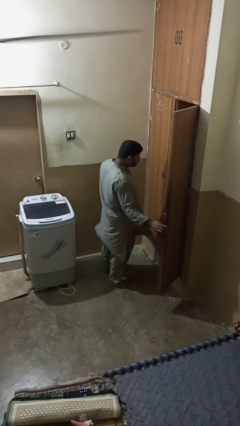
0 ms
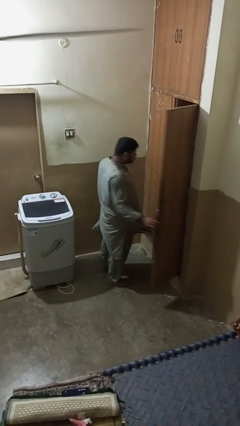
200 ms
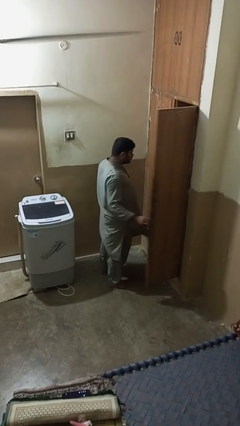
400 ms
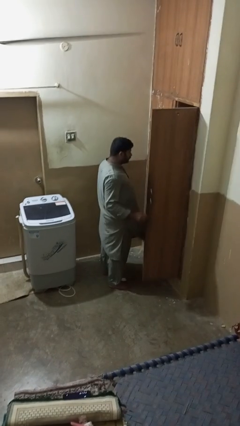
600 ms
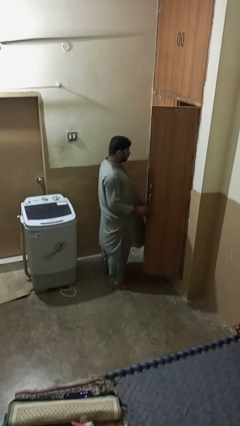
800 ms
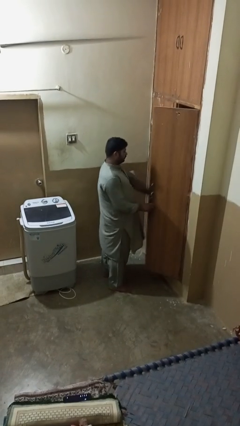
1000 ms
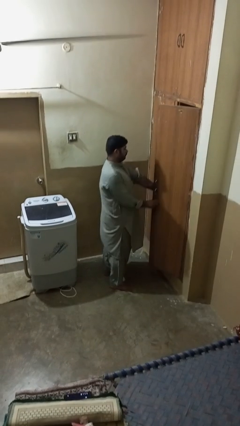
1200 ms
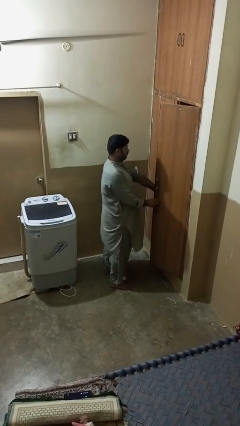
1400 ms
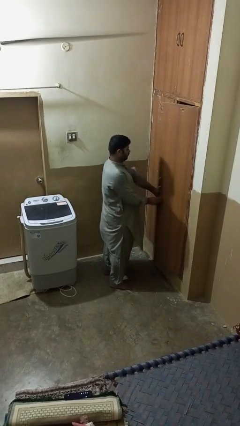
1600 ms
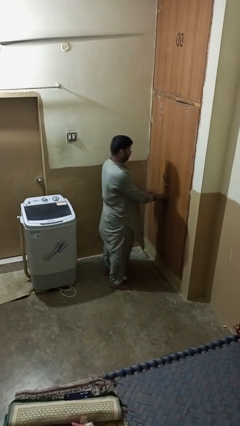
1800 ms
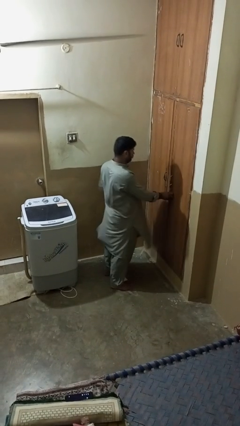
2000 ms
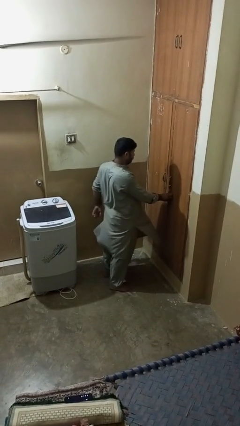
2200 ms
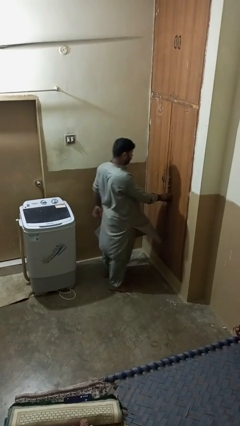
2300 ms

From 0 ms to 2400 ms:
person closes closet door

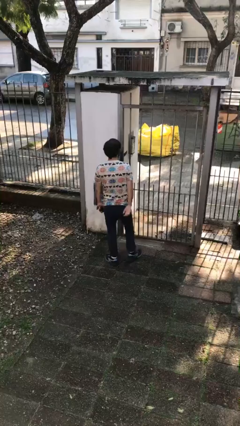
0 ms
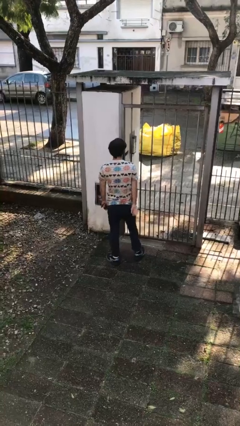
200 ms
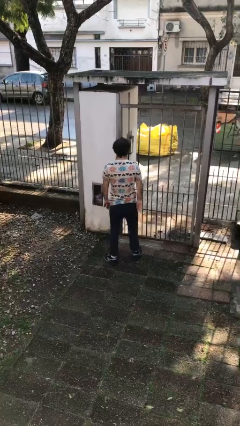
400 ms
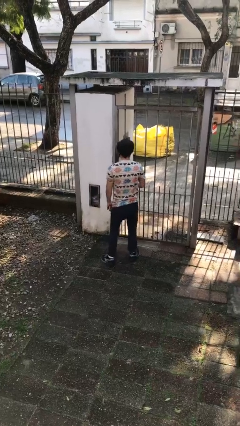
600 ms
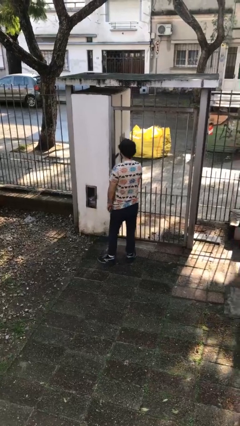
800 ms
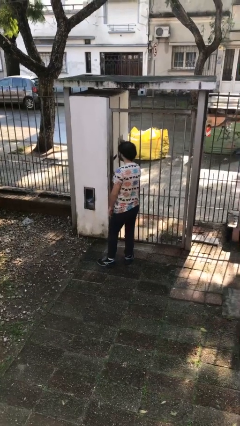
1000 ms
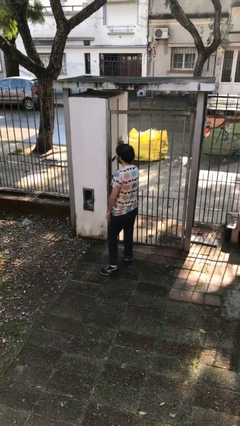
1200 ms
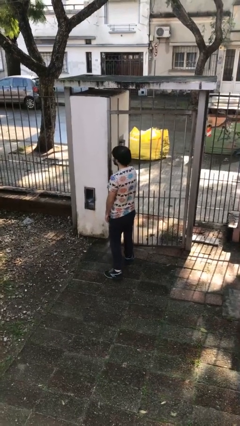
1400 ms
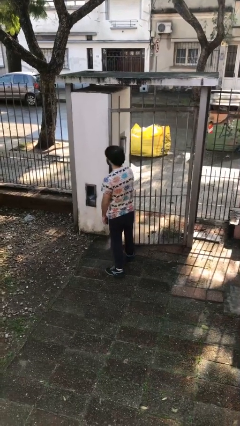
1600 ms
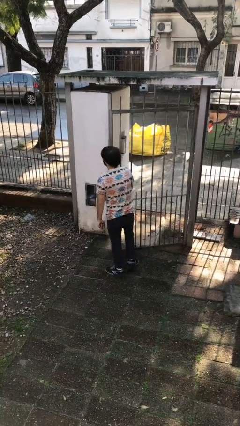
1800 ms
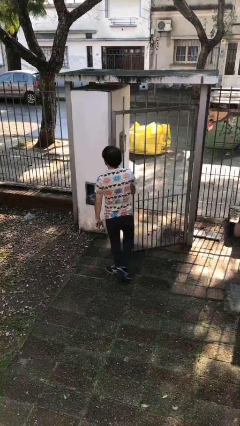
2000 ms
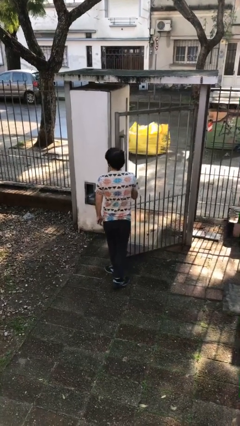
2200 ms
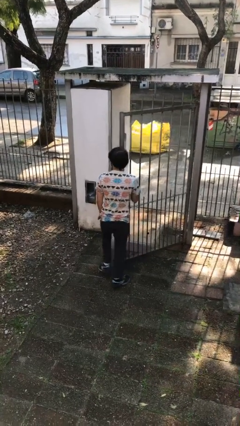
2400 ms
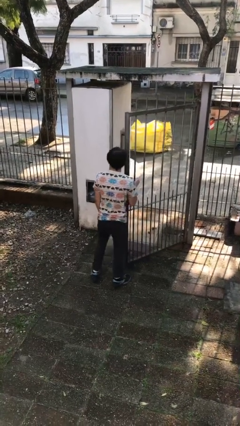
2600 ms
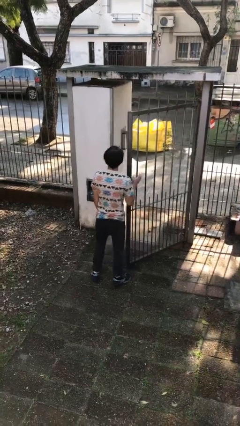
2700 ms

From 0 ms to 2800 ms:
person opens gate

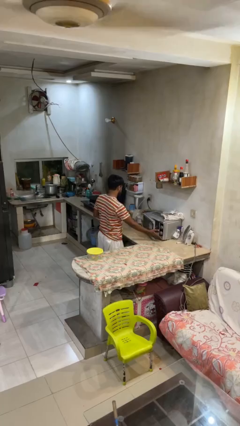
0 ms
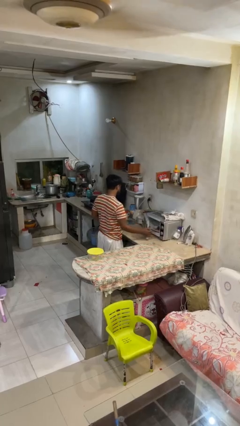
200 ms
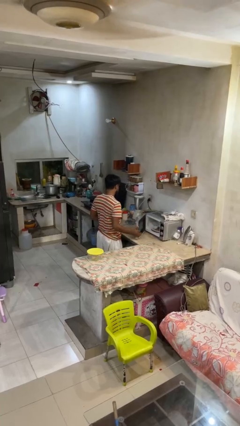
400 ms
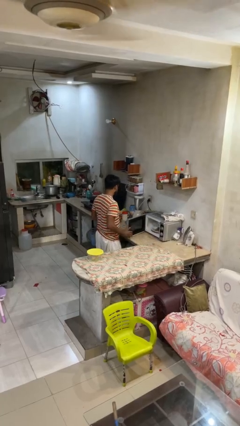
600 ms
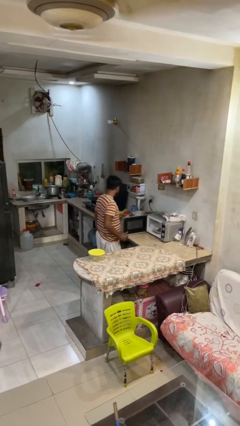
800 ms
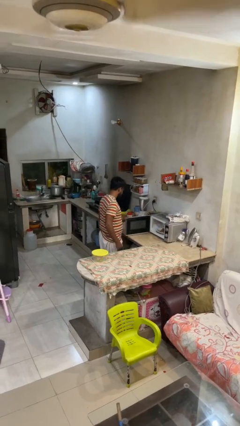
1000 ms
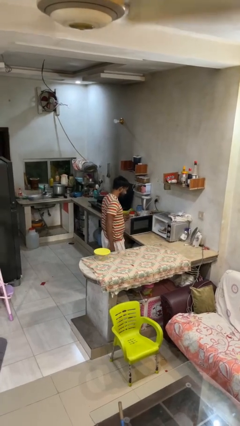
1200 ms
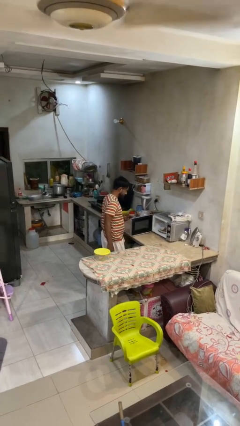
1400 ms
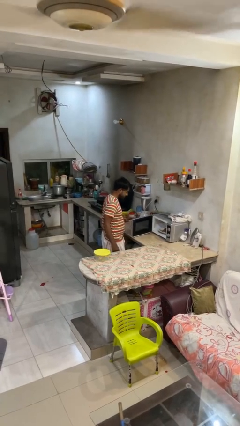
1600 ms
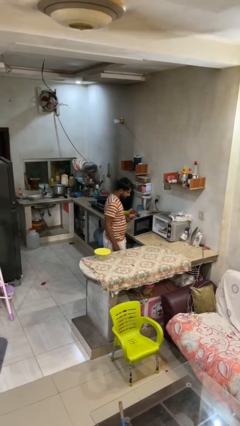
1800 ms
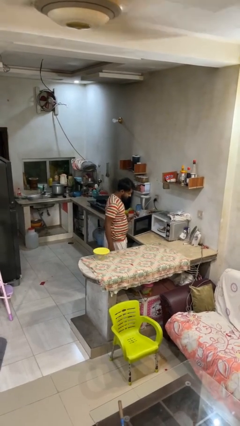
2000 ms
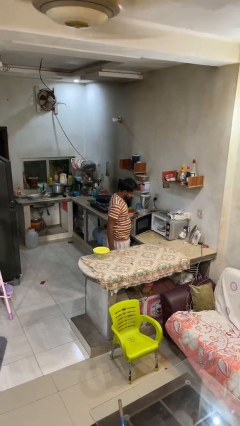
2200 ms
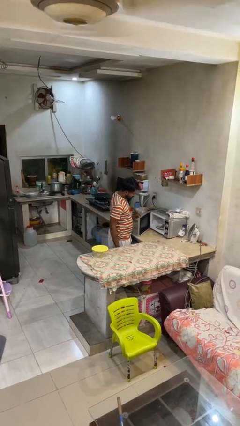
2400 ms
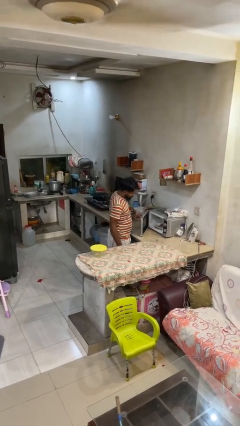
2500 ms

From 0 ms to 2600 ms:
person opens microwave

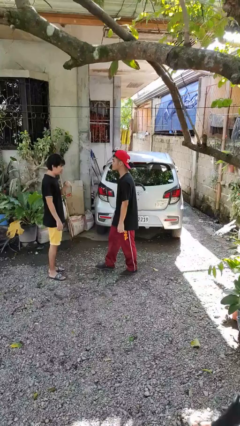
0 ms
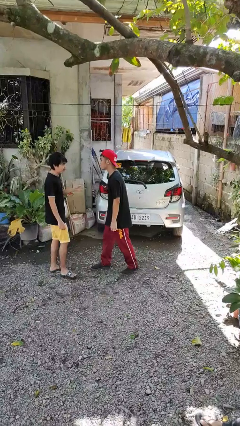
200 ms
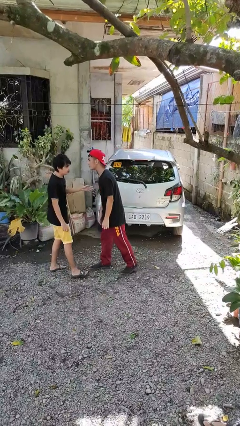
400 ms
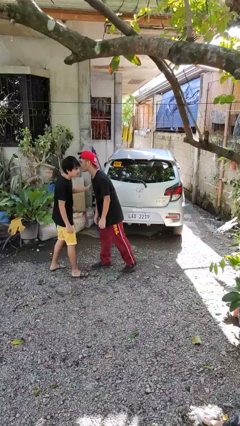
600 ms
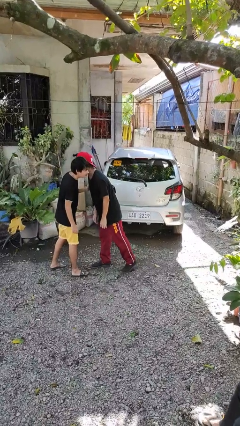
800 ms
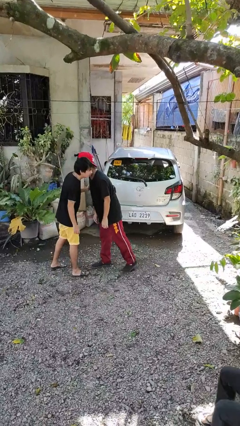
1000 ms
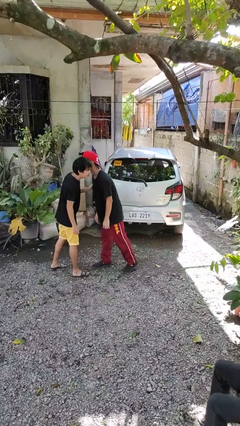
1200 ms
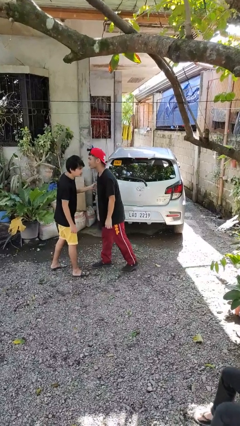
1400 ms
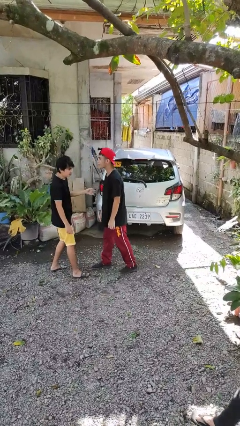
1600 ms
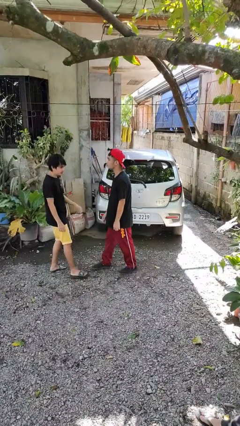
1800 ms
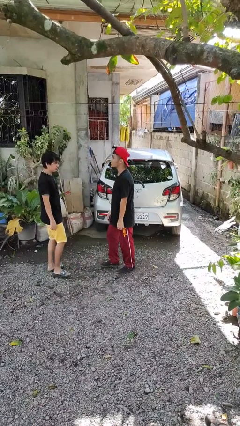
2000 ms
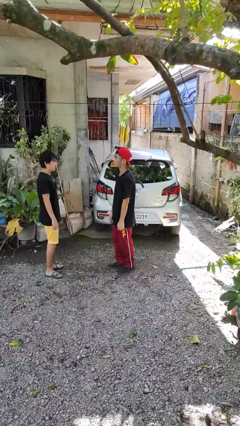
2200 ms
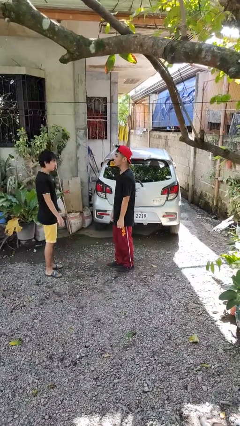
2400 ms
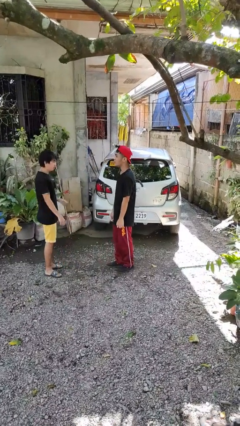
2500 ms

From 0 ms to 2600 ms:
person kisses cheek of person

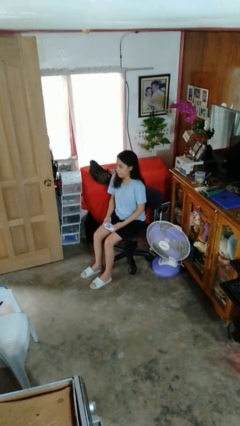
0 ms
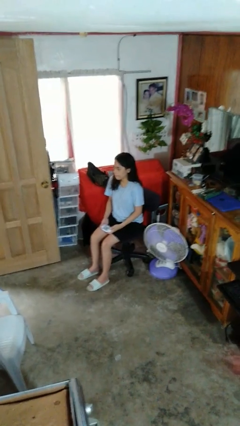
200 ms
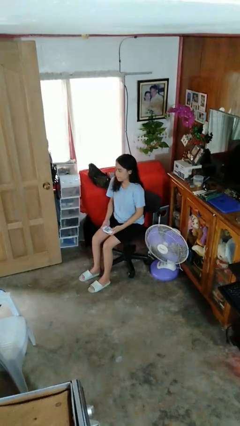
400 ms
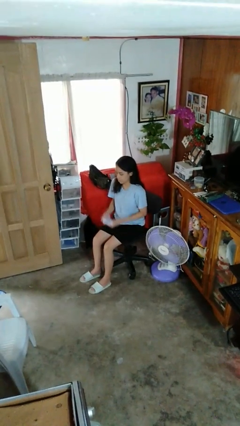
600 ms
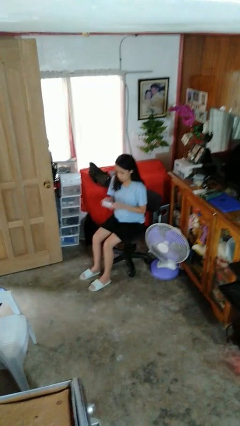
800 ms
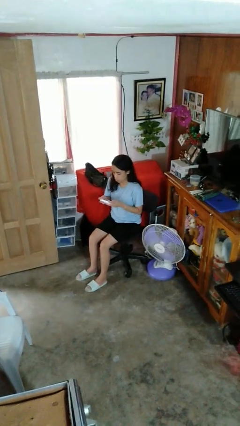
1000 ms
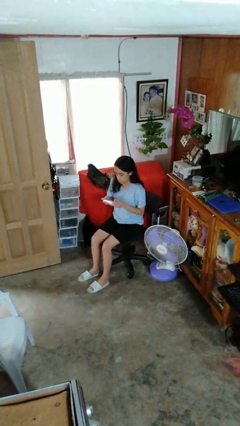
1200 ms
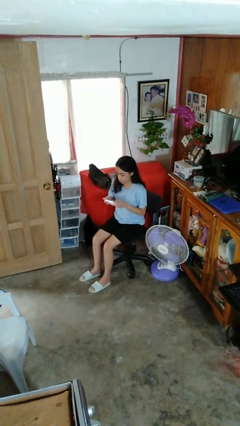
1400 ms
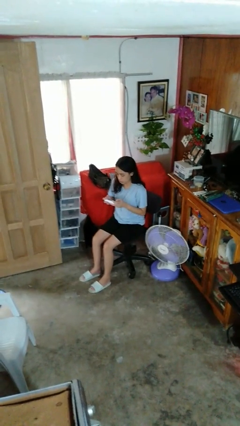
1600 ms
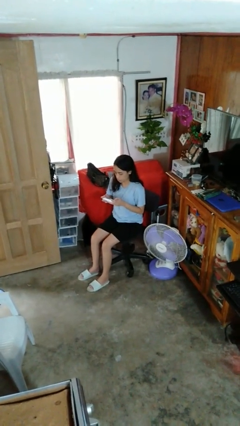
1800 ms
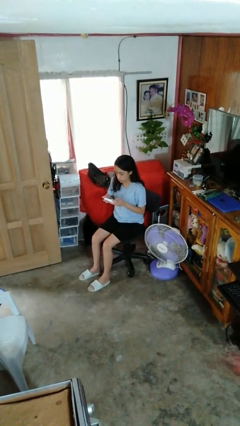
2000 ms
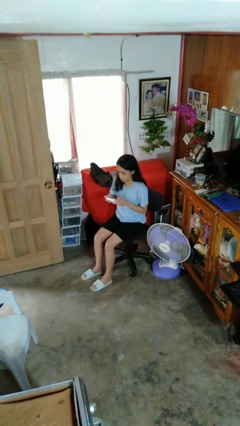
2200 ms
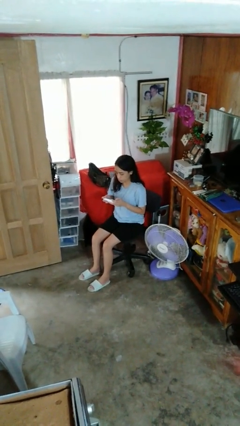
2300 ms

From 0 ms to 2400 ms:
person interacts with handheld game

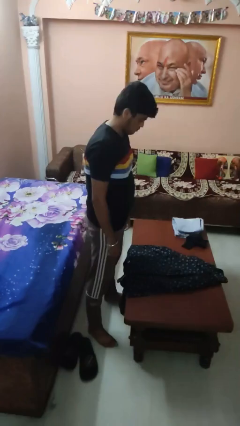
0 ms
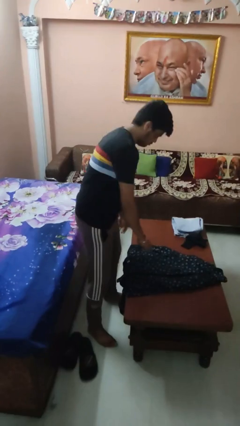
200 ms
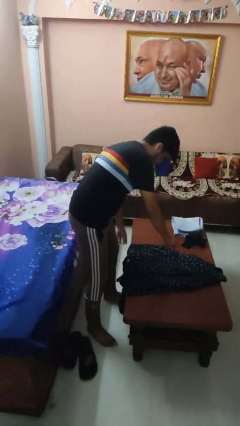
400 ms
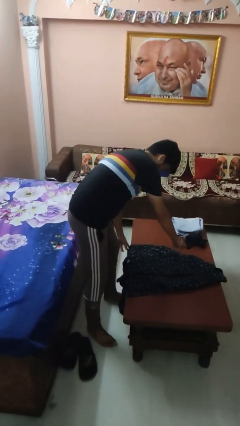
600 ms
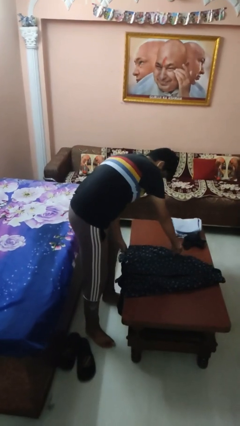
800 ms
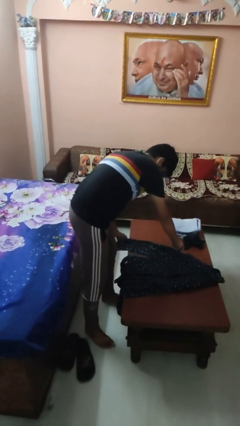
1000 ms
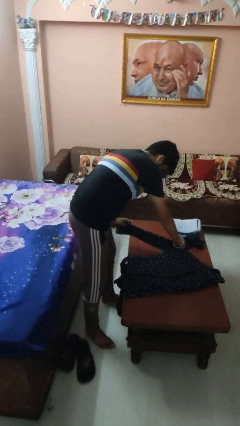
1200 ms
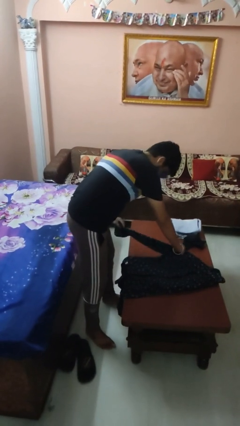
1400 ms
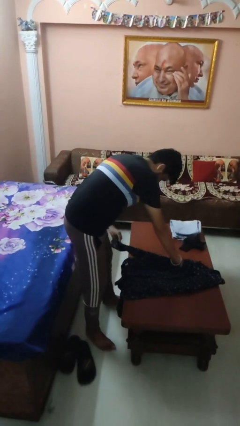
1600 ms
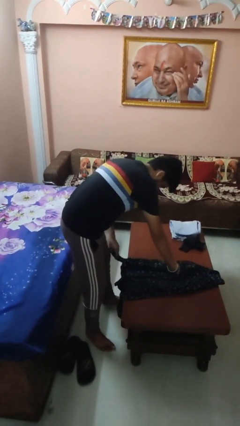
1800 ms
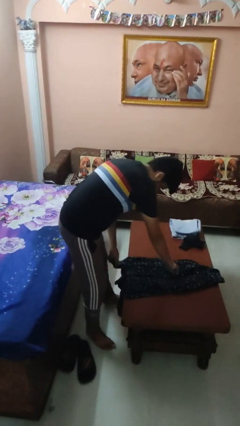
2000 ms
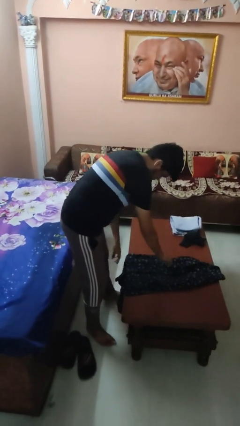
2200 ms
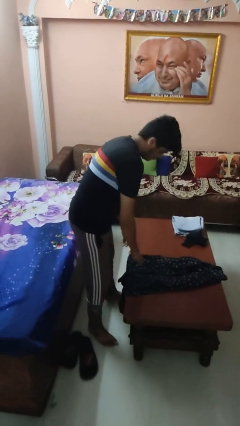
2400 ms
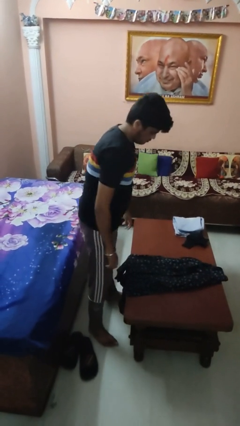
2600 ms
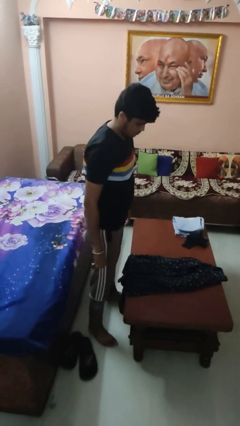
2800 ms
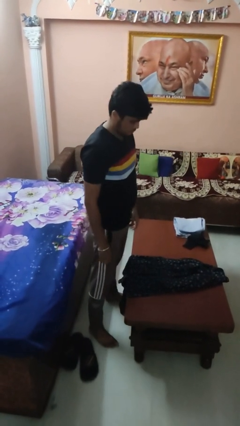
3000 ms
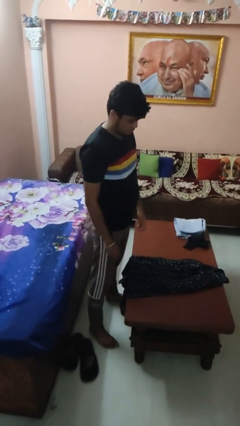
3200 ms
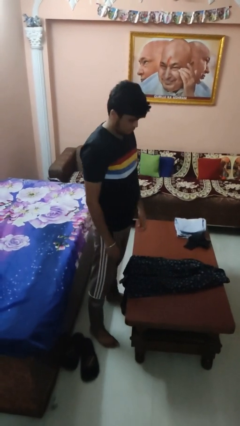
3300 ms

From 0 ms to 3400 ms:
person folds shirt

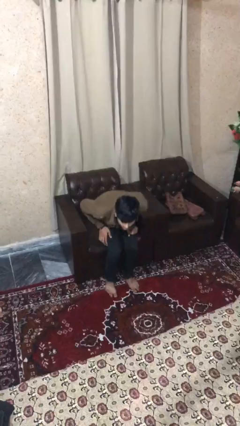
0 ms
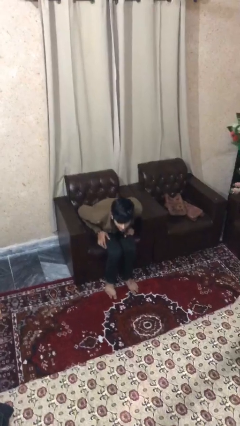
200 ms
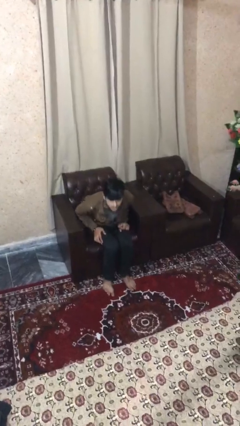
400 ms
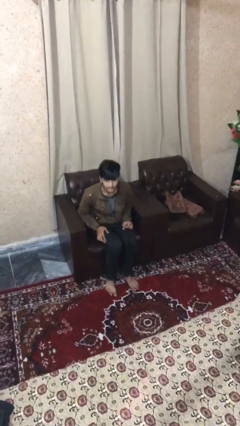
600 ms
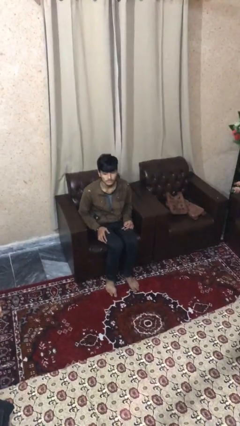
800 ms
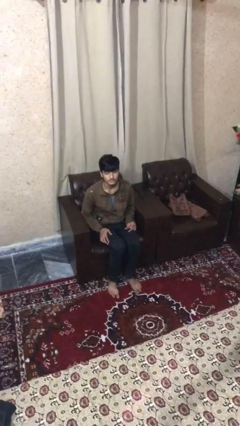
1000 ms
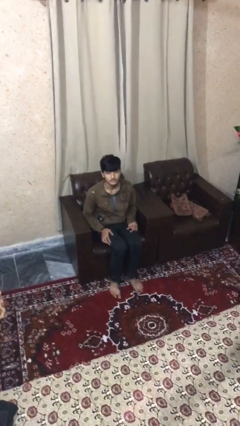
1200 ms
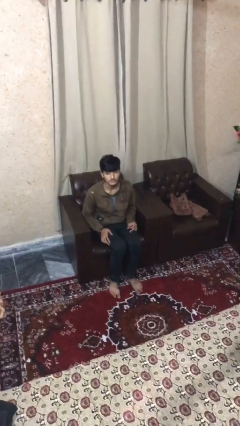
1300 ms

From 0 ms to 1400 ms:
person sits down
